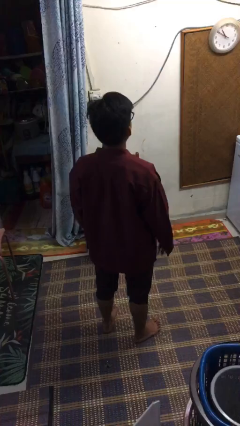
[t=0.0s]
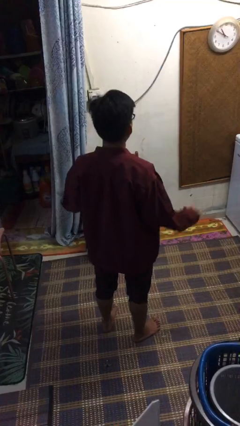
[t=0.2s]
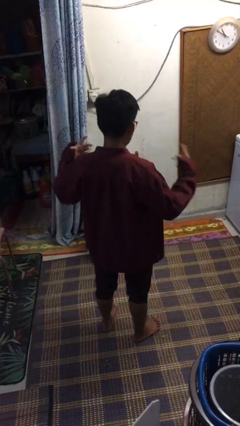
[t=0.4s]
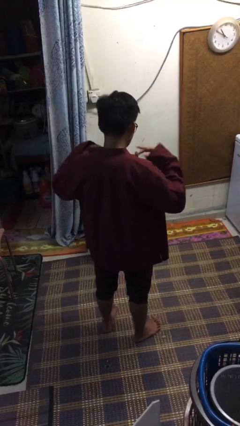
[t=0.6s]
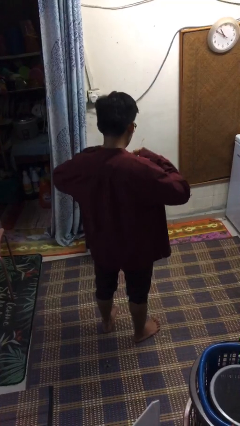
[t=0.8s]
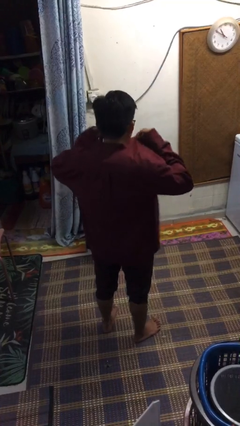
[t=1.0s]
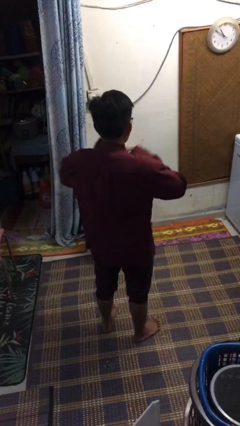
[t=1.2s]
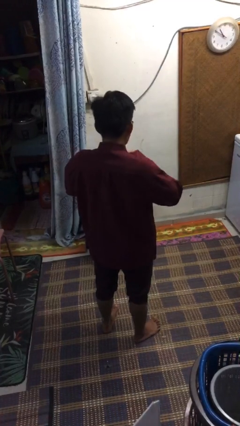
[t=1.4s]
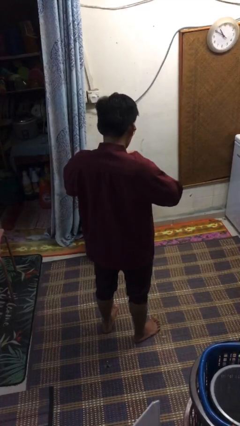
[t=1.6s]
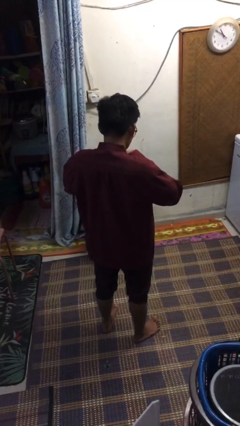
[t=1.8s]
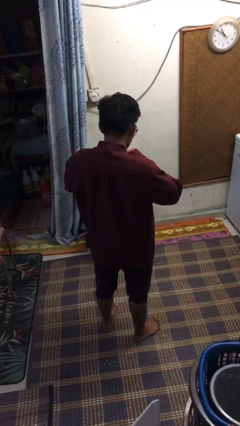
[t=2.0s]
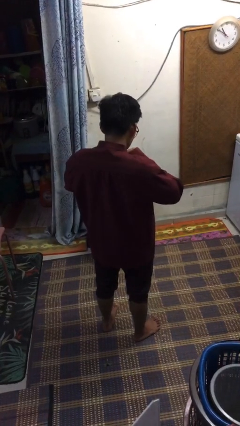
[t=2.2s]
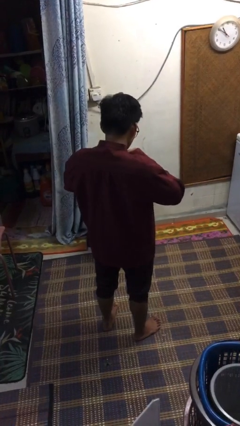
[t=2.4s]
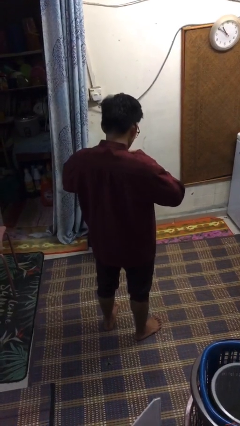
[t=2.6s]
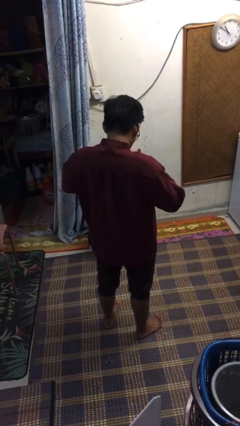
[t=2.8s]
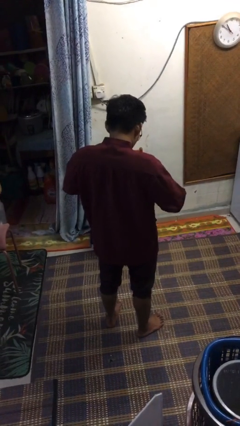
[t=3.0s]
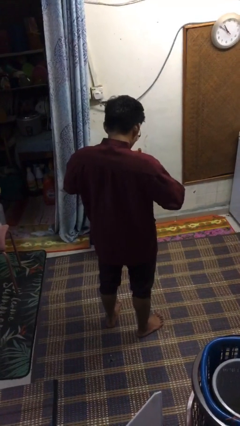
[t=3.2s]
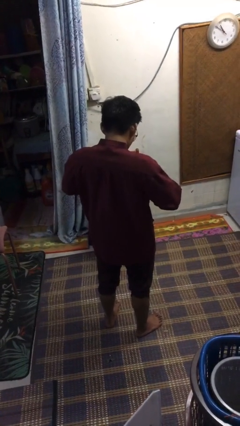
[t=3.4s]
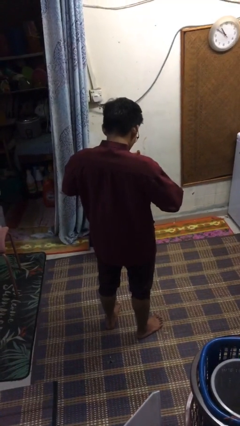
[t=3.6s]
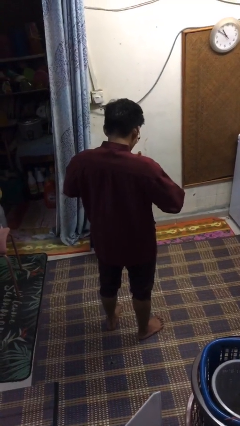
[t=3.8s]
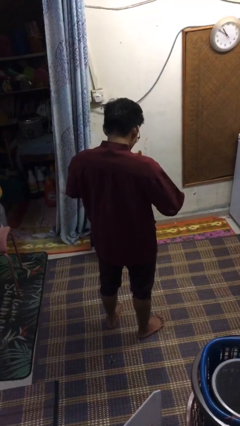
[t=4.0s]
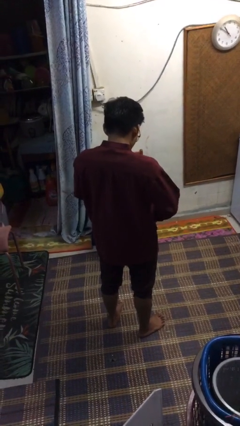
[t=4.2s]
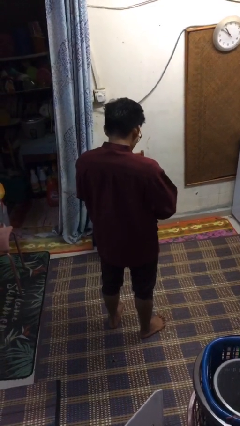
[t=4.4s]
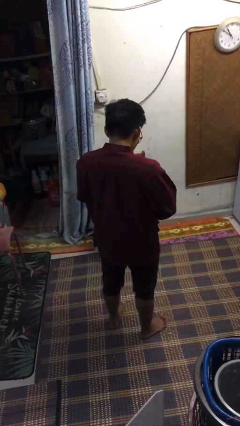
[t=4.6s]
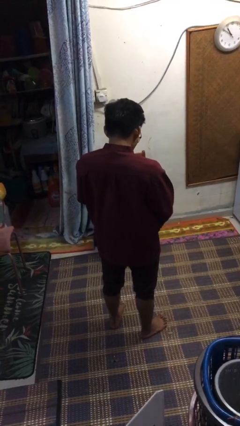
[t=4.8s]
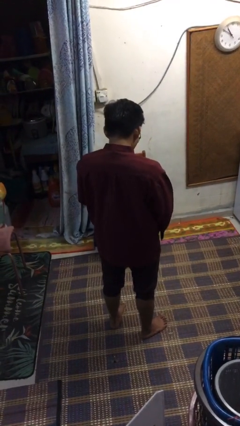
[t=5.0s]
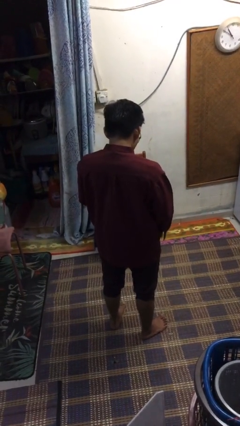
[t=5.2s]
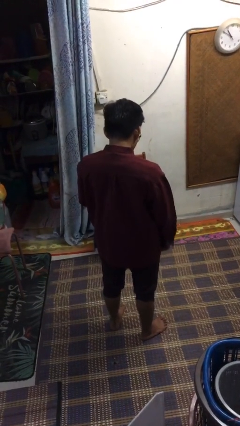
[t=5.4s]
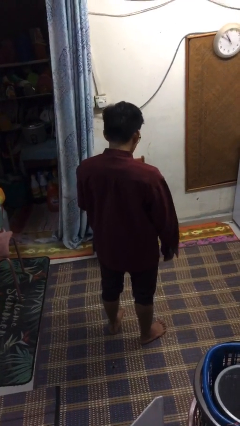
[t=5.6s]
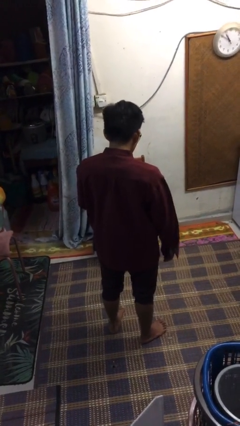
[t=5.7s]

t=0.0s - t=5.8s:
person buttons shirt

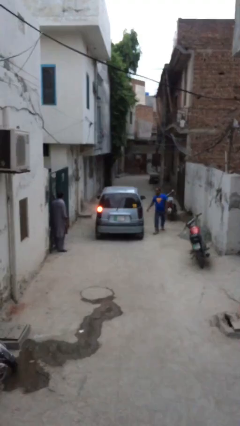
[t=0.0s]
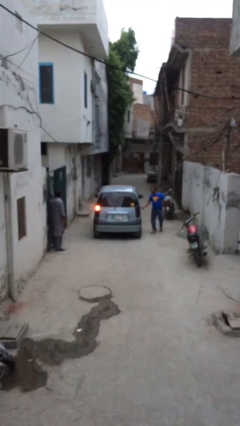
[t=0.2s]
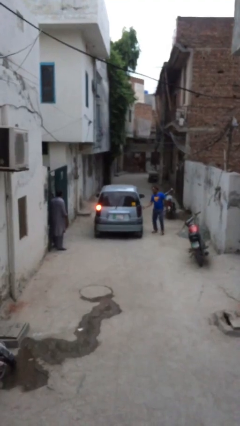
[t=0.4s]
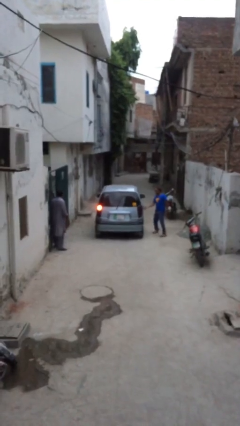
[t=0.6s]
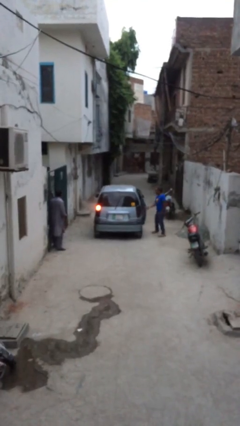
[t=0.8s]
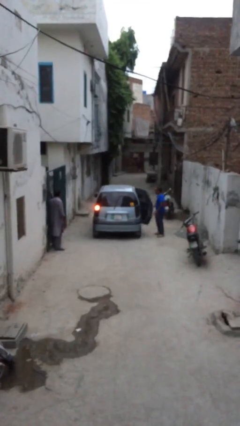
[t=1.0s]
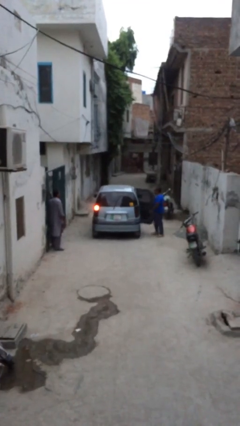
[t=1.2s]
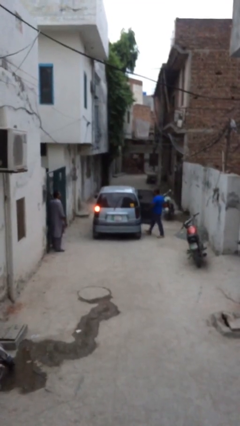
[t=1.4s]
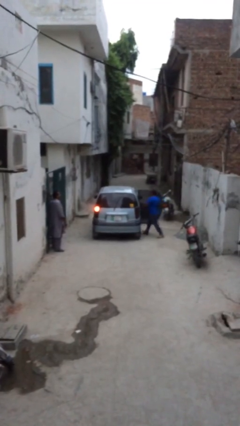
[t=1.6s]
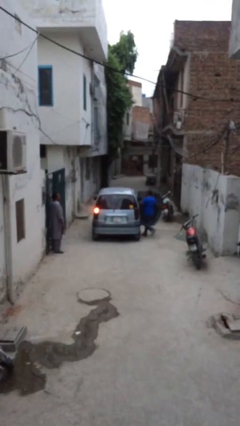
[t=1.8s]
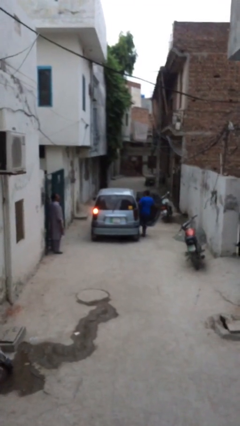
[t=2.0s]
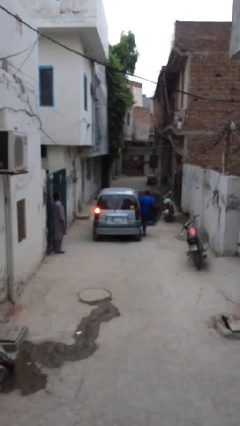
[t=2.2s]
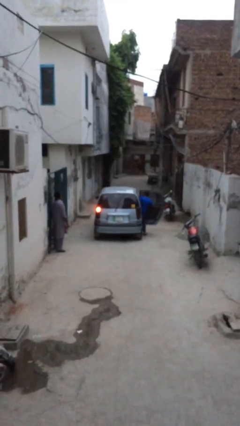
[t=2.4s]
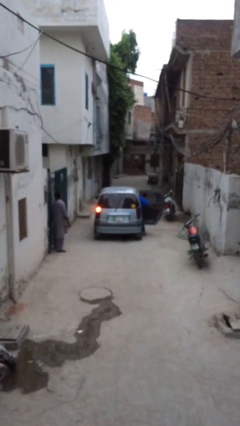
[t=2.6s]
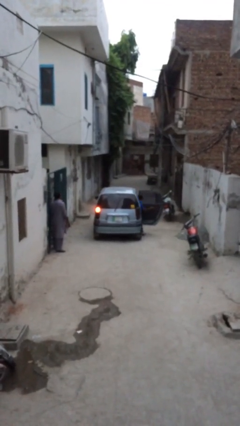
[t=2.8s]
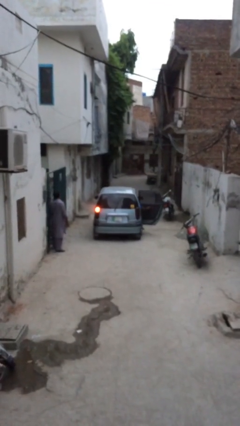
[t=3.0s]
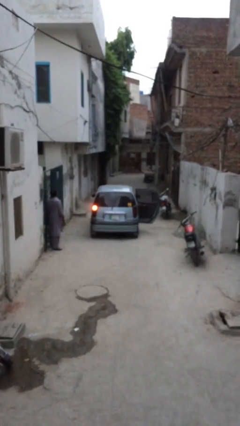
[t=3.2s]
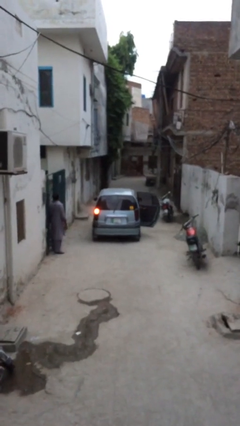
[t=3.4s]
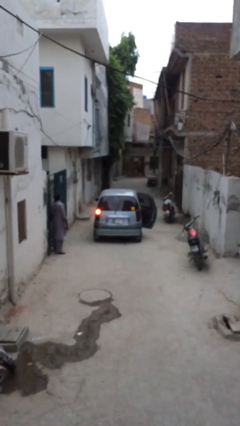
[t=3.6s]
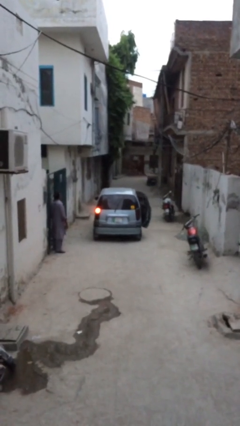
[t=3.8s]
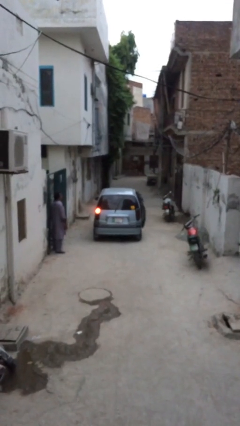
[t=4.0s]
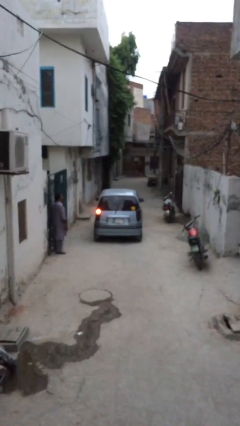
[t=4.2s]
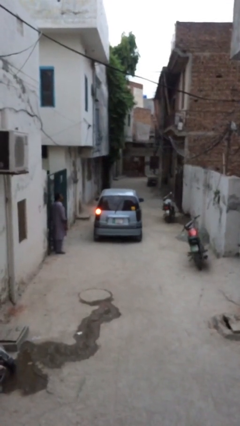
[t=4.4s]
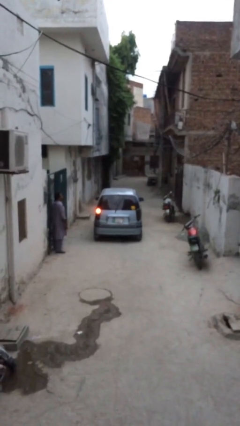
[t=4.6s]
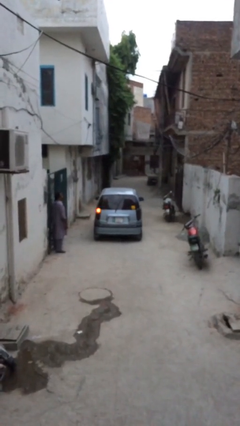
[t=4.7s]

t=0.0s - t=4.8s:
car picks up person

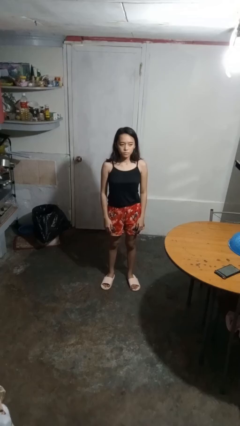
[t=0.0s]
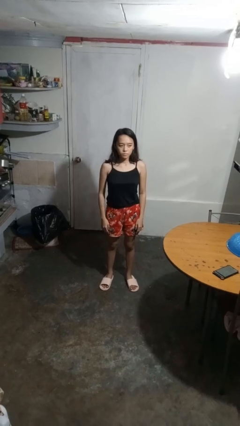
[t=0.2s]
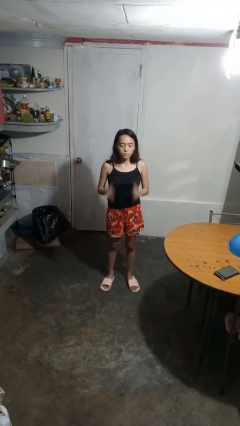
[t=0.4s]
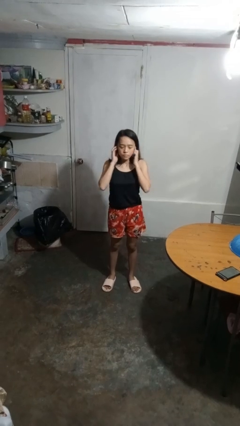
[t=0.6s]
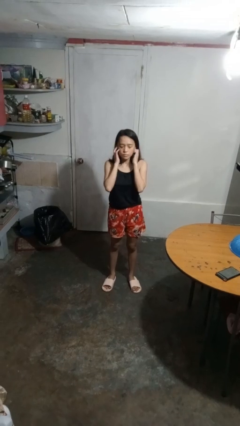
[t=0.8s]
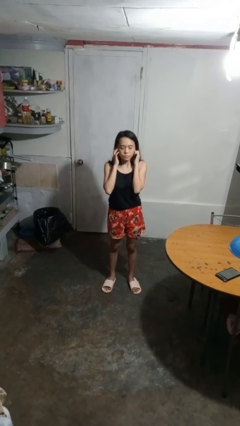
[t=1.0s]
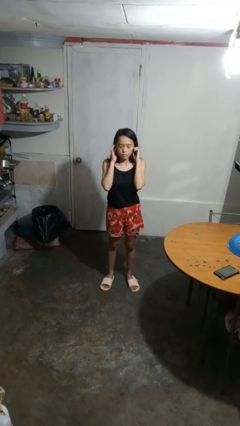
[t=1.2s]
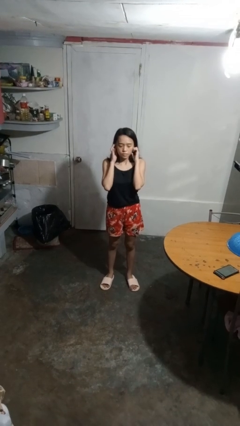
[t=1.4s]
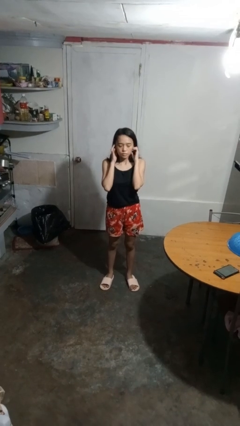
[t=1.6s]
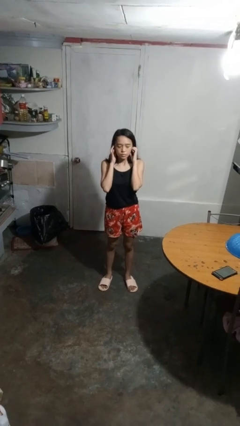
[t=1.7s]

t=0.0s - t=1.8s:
person puts fingers in ear

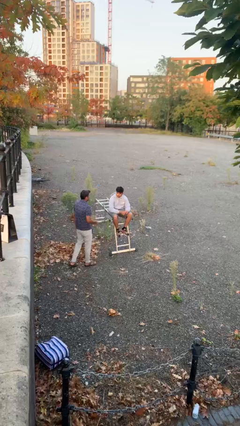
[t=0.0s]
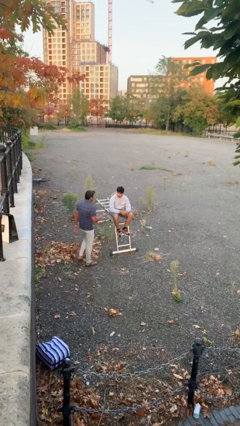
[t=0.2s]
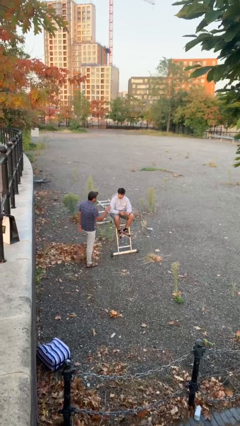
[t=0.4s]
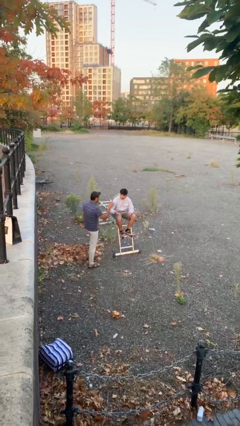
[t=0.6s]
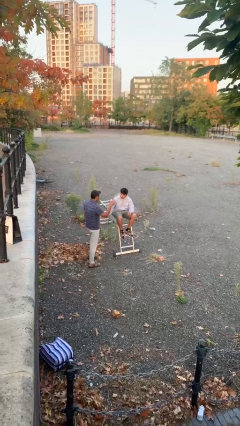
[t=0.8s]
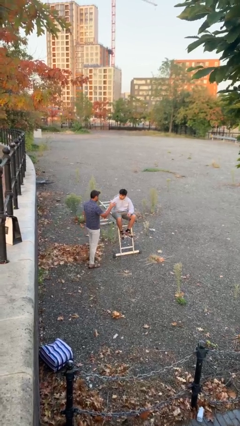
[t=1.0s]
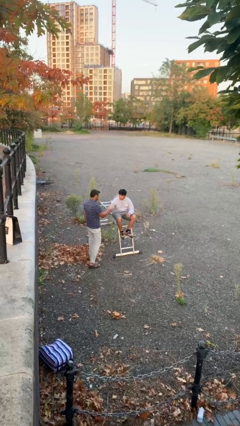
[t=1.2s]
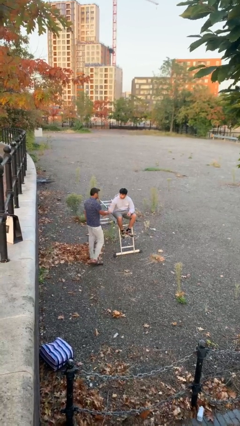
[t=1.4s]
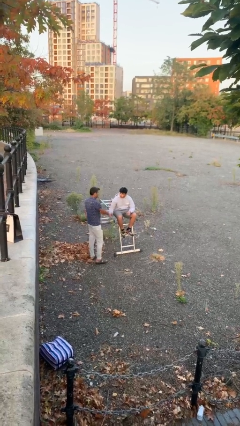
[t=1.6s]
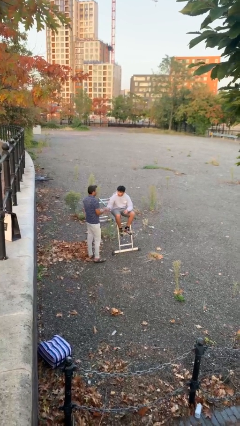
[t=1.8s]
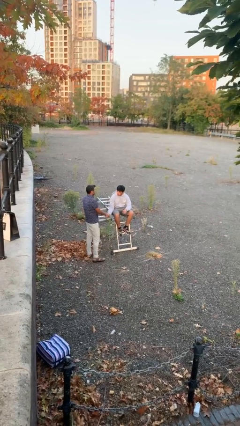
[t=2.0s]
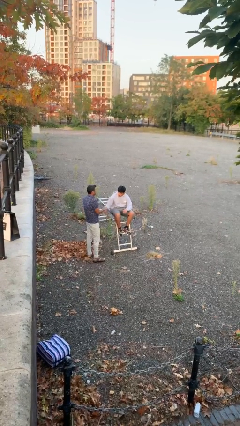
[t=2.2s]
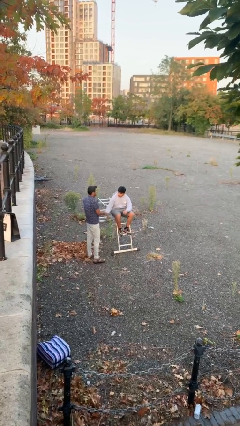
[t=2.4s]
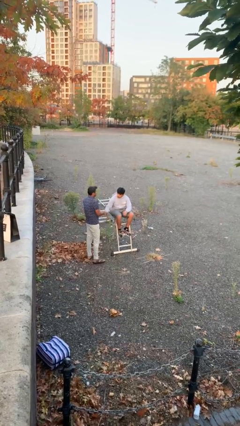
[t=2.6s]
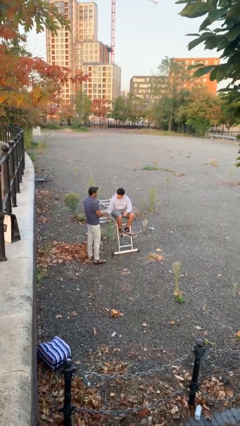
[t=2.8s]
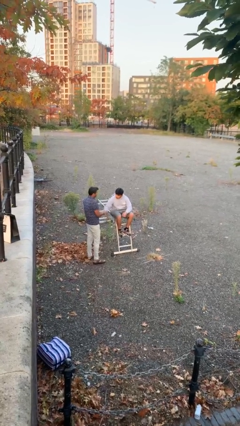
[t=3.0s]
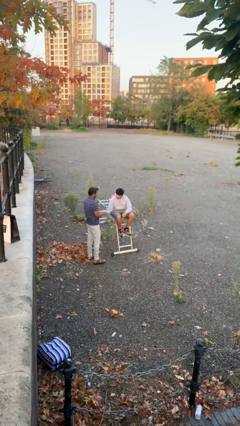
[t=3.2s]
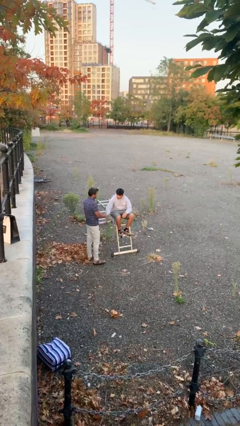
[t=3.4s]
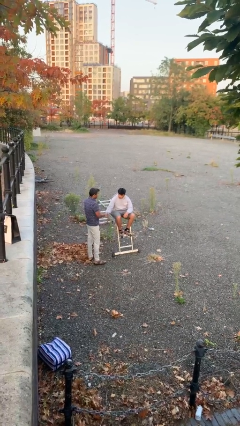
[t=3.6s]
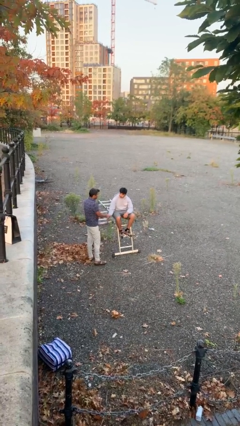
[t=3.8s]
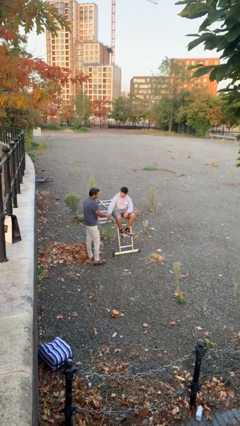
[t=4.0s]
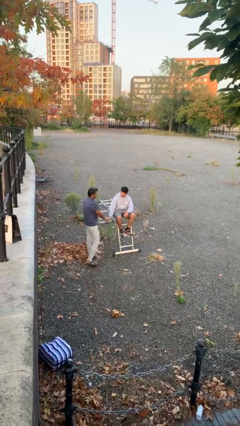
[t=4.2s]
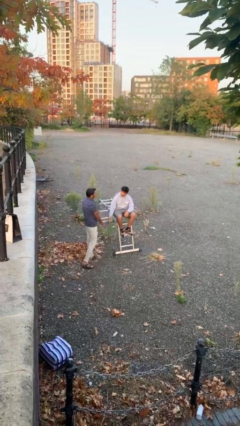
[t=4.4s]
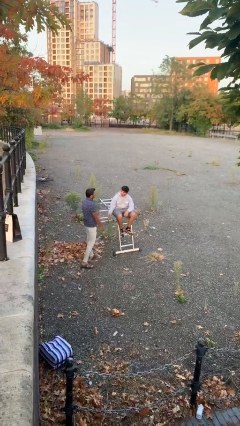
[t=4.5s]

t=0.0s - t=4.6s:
person shakes hand

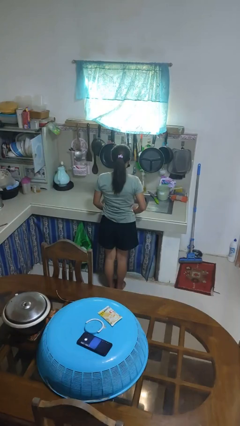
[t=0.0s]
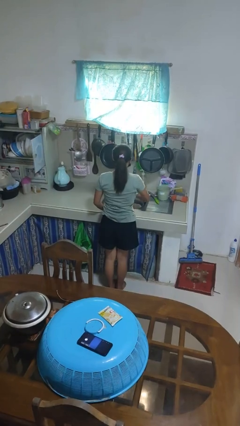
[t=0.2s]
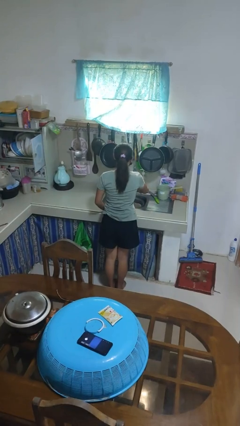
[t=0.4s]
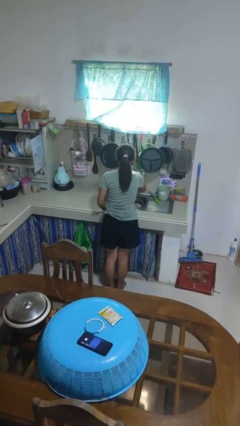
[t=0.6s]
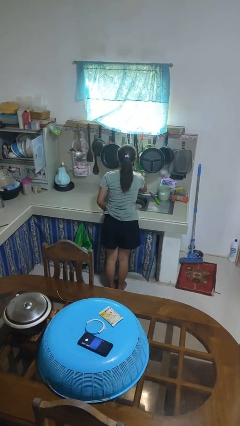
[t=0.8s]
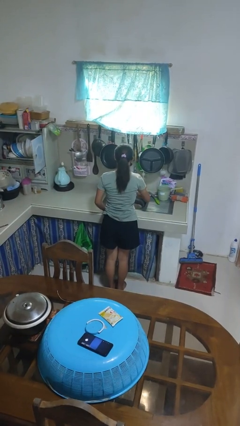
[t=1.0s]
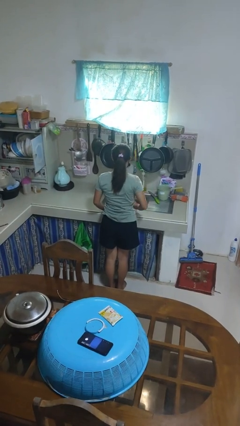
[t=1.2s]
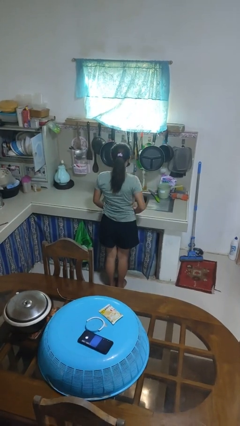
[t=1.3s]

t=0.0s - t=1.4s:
person turns off faucet
